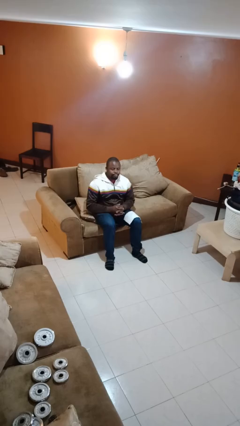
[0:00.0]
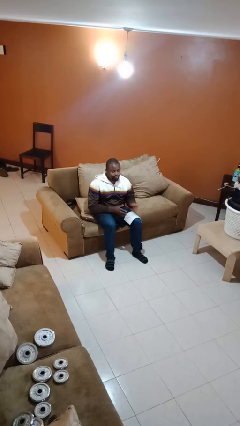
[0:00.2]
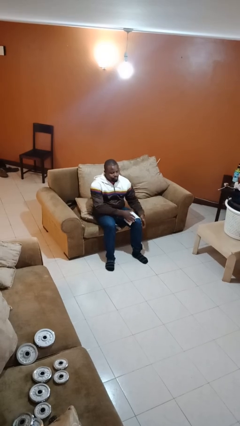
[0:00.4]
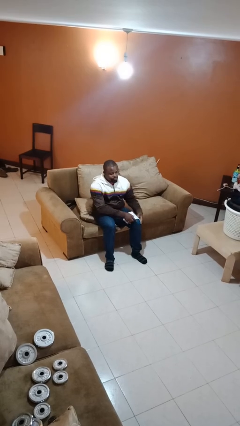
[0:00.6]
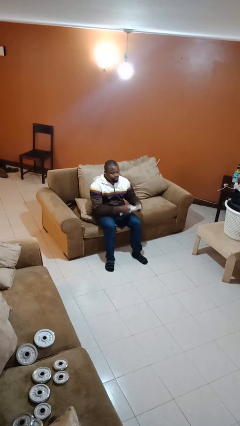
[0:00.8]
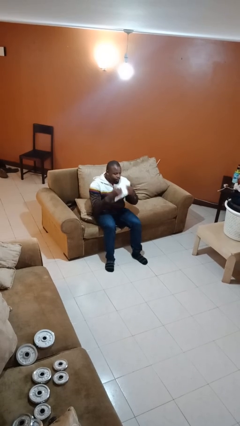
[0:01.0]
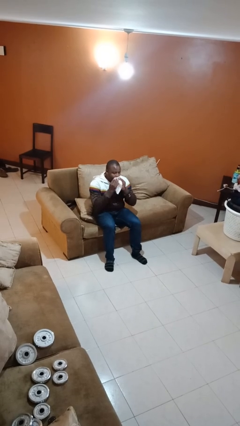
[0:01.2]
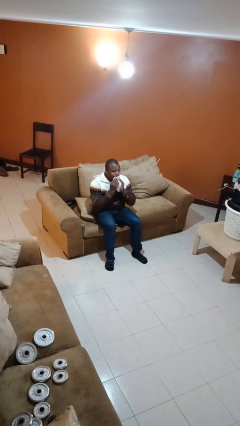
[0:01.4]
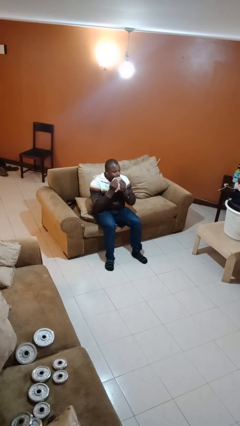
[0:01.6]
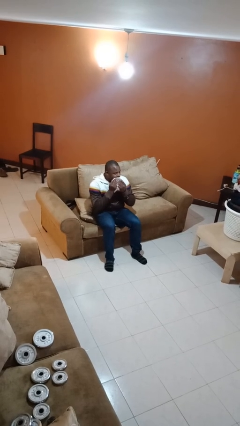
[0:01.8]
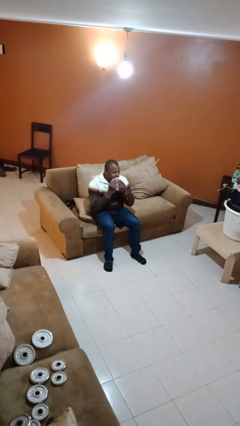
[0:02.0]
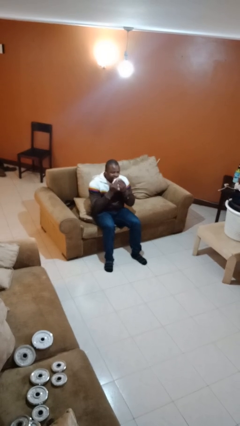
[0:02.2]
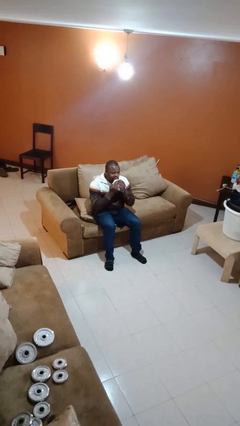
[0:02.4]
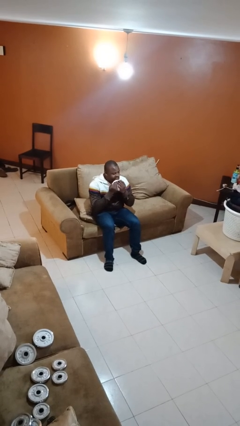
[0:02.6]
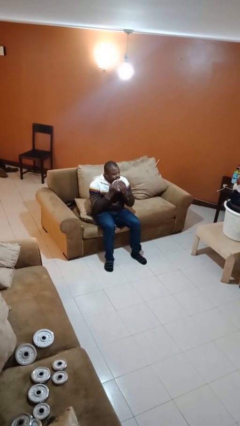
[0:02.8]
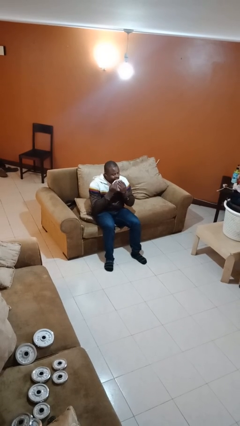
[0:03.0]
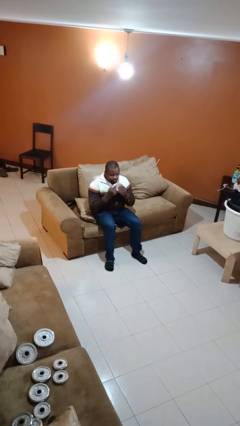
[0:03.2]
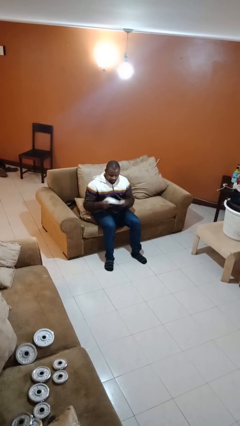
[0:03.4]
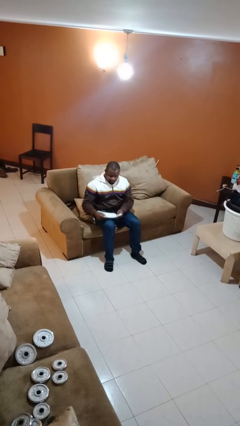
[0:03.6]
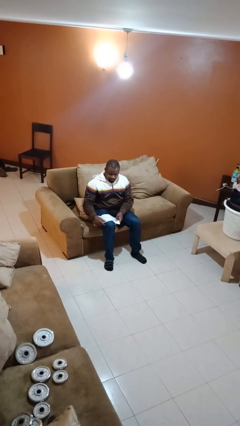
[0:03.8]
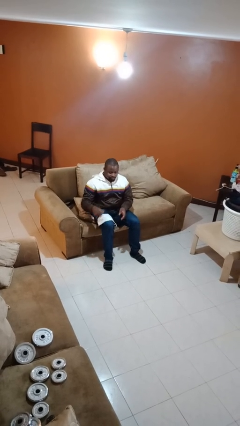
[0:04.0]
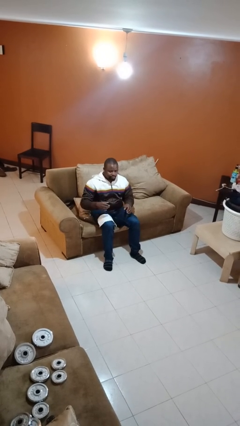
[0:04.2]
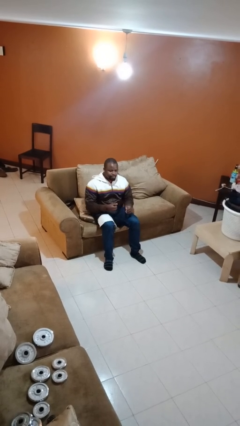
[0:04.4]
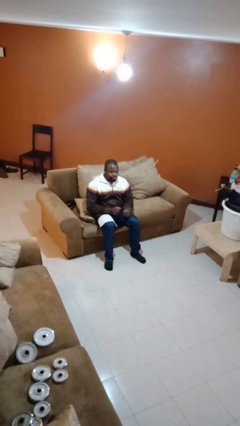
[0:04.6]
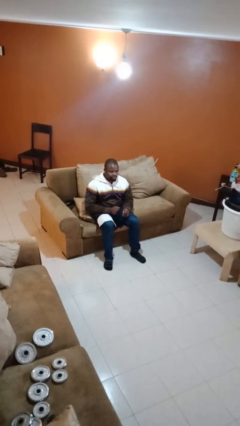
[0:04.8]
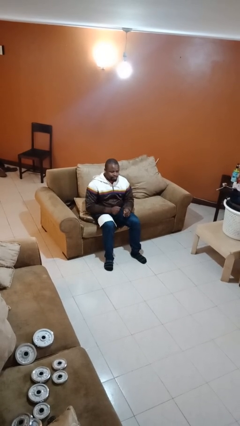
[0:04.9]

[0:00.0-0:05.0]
person wipes mouth with napkin

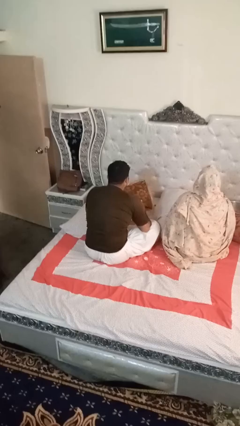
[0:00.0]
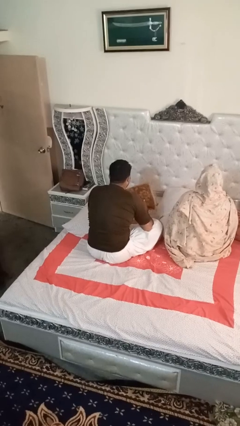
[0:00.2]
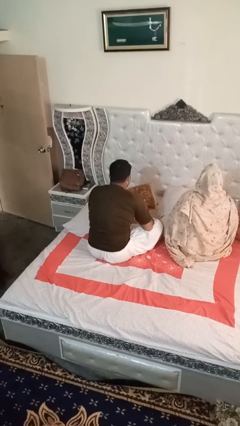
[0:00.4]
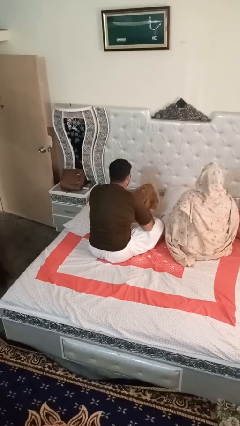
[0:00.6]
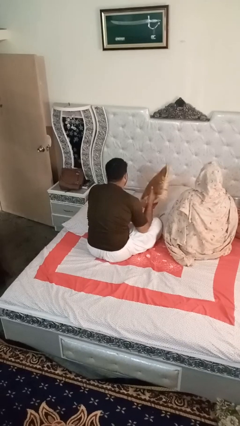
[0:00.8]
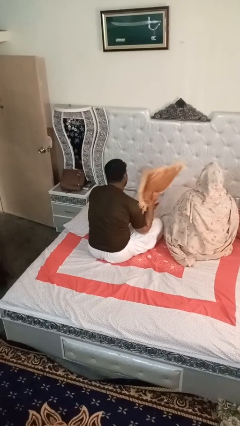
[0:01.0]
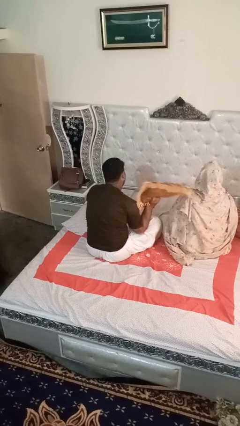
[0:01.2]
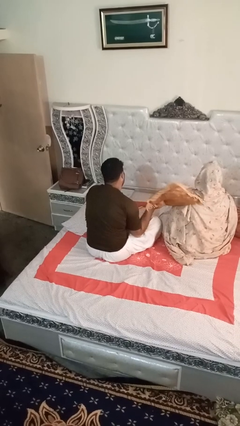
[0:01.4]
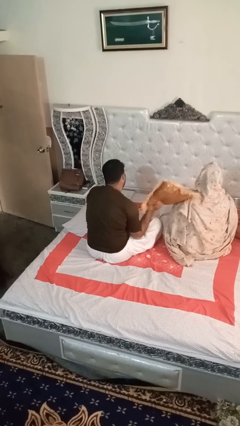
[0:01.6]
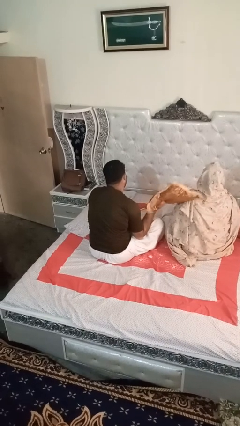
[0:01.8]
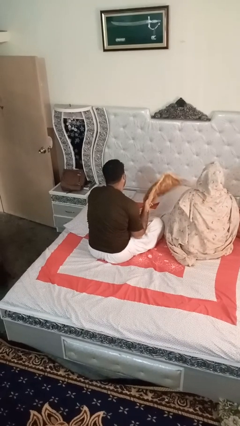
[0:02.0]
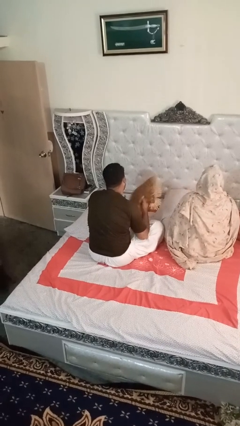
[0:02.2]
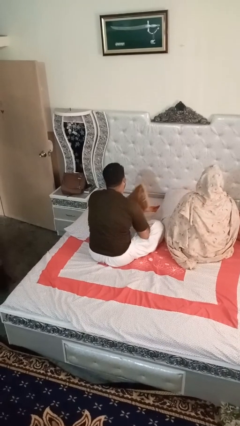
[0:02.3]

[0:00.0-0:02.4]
person hits person with pillow

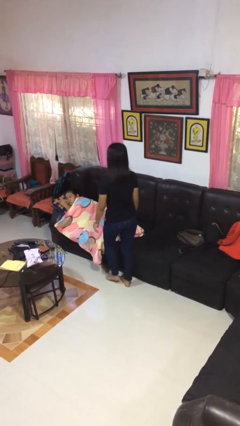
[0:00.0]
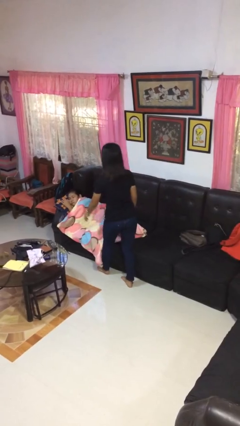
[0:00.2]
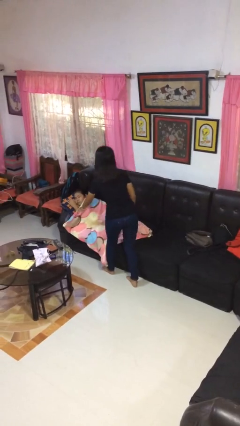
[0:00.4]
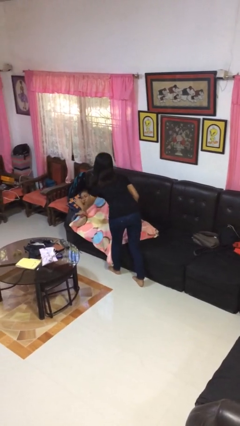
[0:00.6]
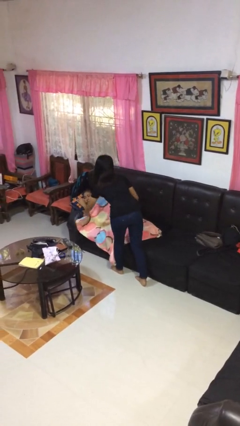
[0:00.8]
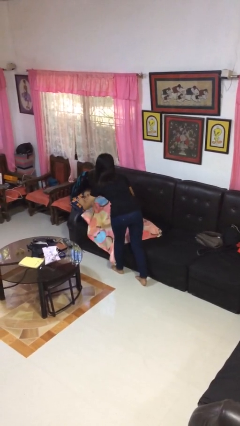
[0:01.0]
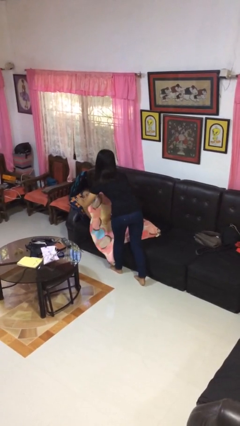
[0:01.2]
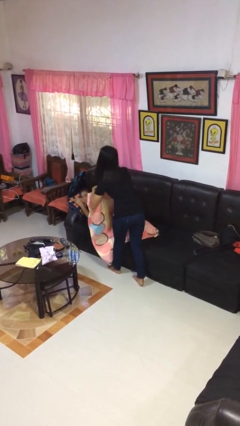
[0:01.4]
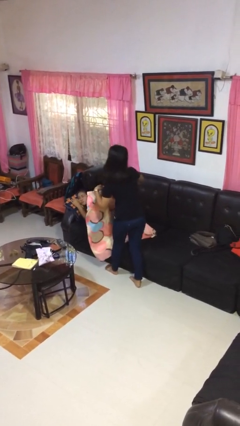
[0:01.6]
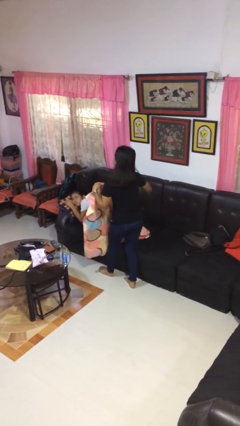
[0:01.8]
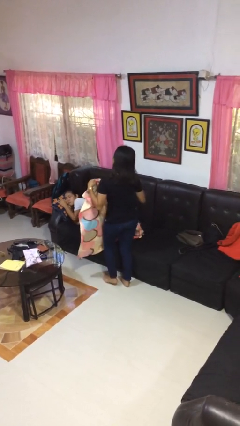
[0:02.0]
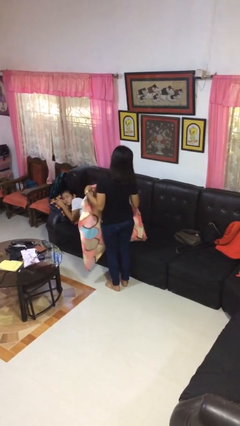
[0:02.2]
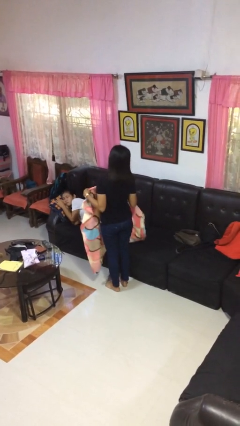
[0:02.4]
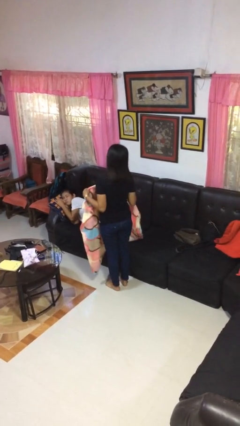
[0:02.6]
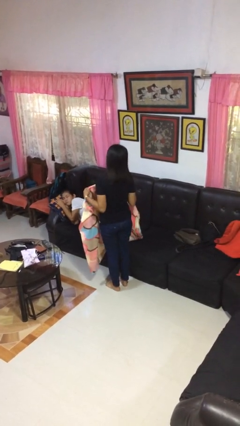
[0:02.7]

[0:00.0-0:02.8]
person uncovers friend with blanket

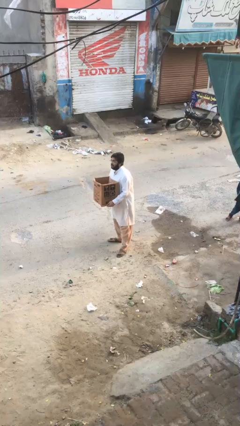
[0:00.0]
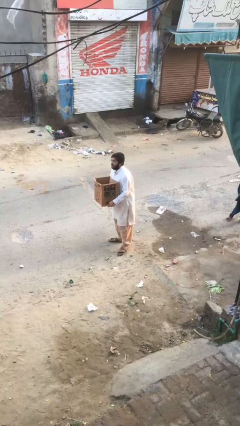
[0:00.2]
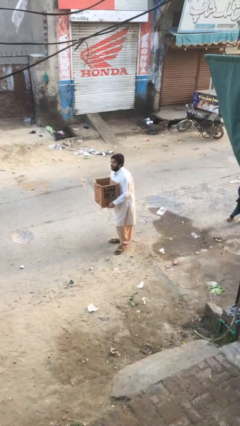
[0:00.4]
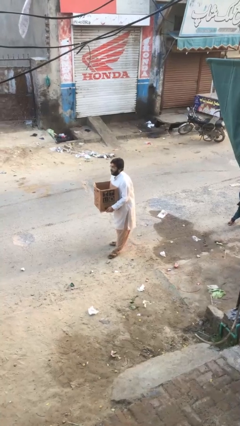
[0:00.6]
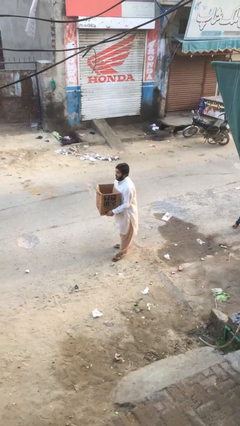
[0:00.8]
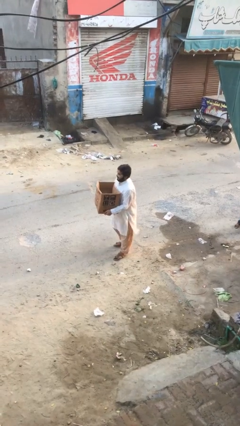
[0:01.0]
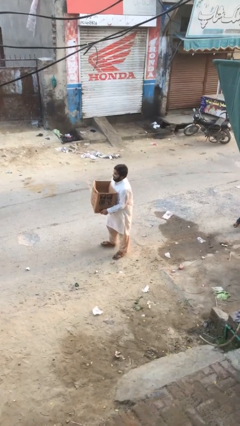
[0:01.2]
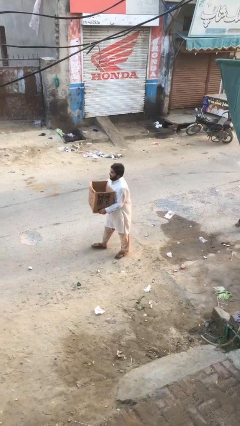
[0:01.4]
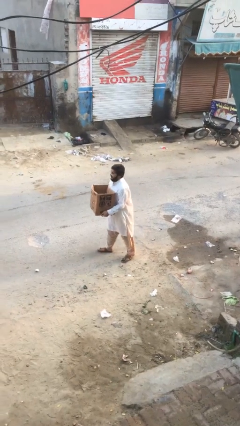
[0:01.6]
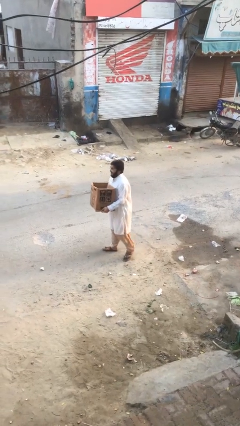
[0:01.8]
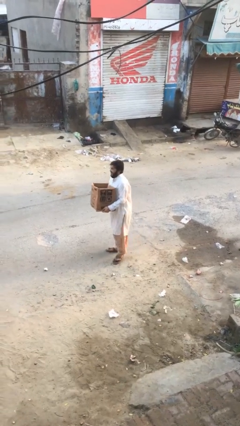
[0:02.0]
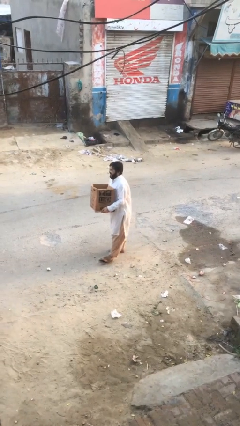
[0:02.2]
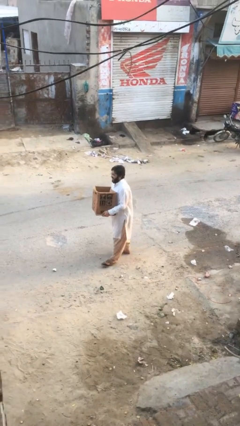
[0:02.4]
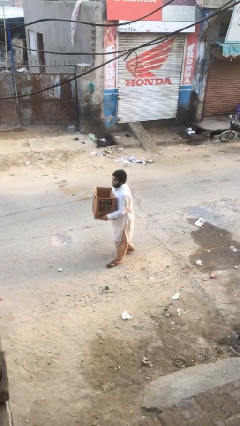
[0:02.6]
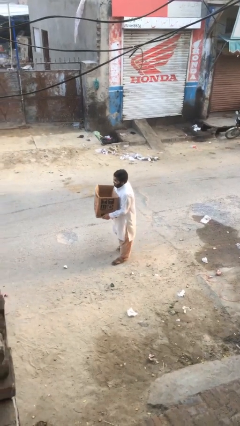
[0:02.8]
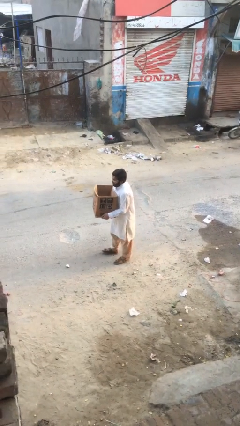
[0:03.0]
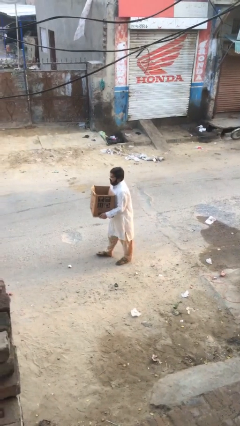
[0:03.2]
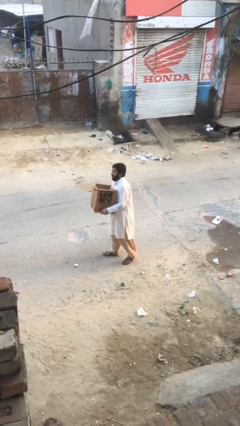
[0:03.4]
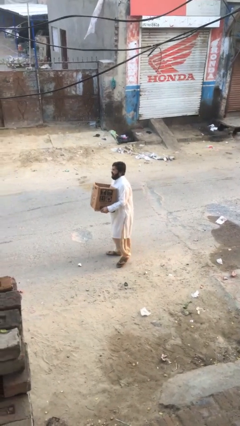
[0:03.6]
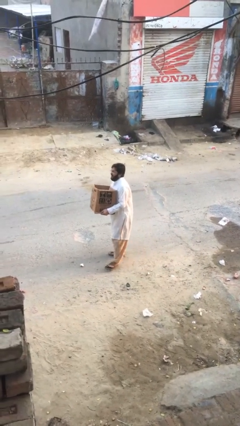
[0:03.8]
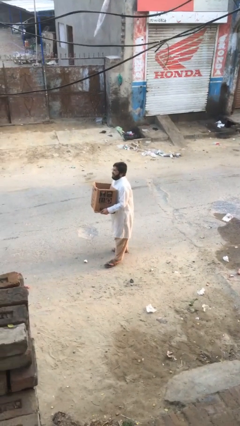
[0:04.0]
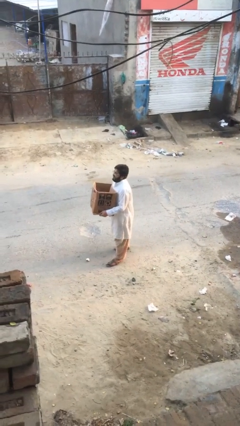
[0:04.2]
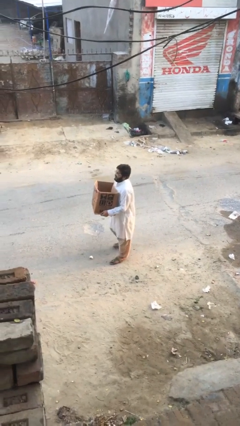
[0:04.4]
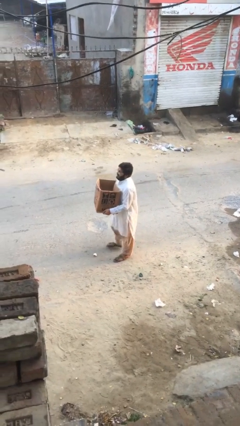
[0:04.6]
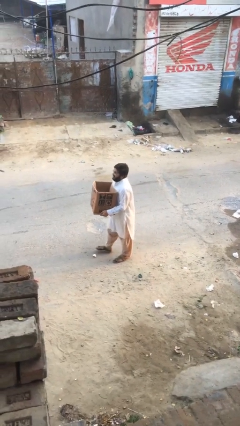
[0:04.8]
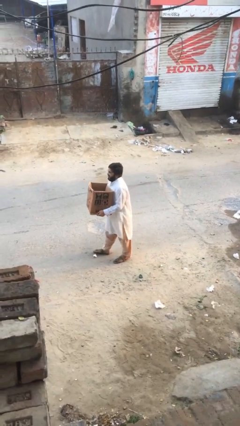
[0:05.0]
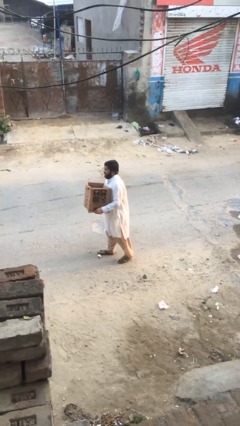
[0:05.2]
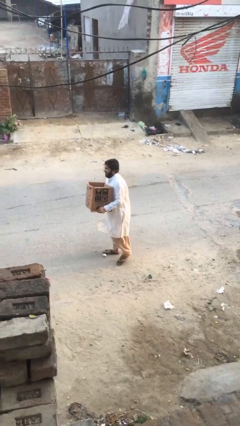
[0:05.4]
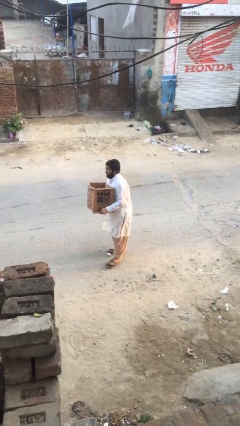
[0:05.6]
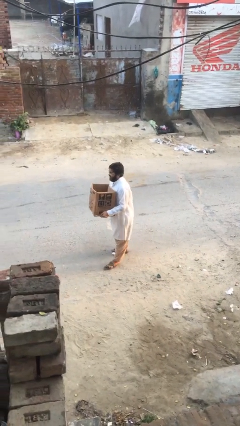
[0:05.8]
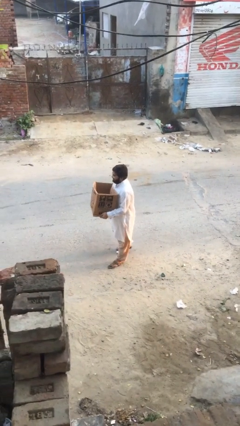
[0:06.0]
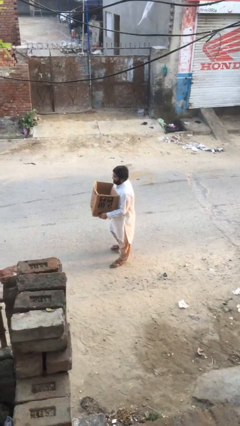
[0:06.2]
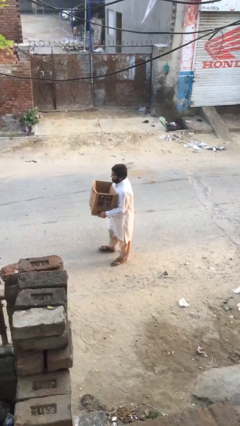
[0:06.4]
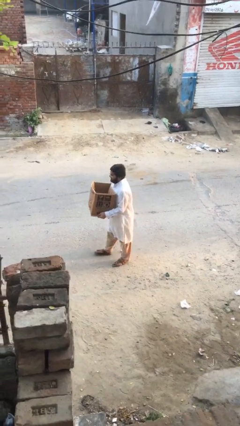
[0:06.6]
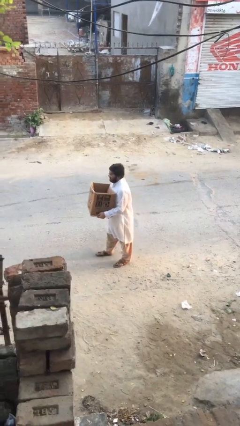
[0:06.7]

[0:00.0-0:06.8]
person carries heavy object

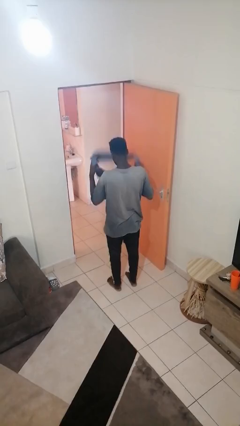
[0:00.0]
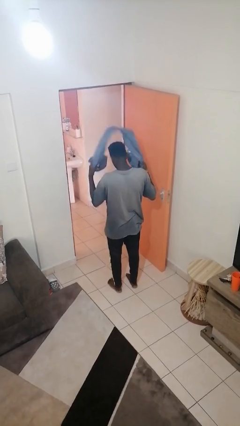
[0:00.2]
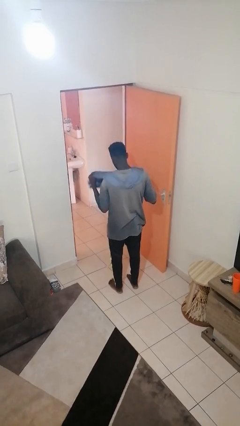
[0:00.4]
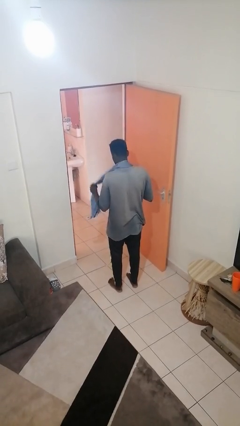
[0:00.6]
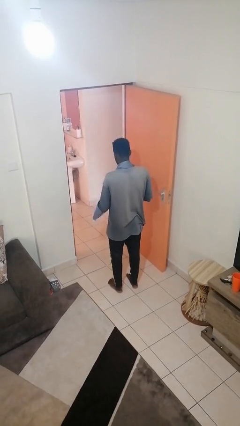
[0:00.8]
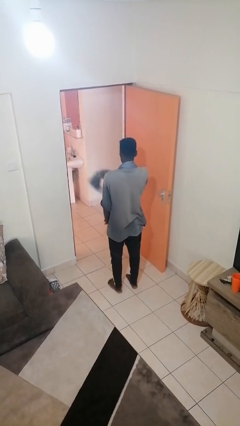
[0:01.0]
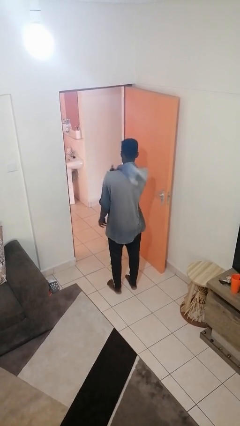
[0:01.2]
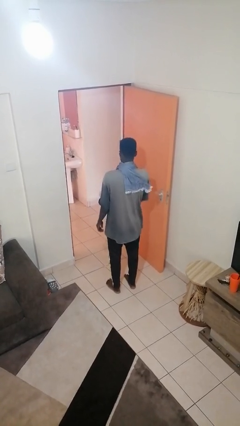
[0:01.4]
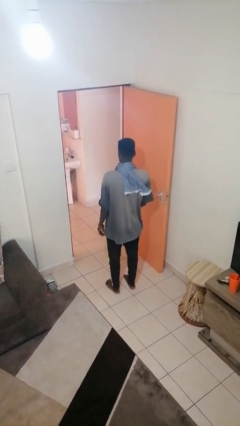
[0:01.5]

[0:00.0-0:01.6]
person puts on scarf
